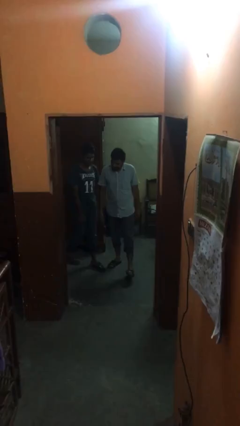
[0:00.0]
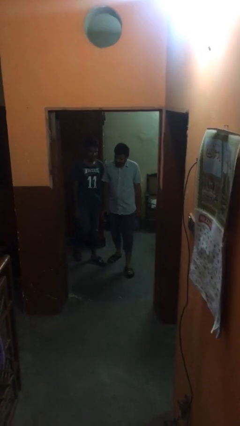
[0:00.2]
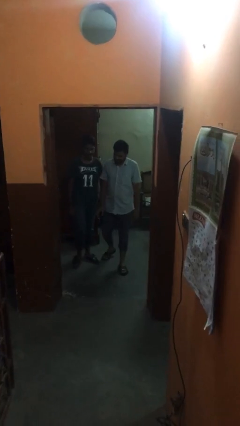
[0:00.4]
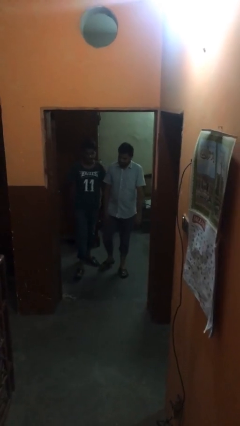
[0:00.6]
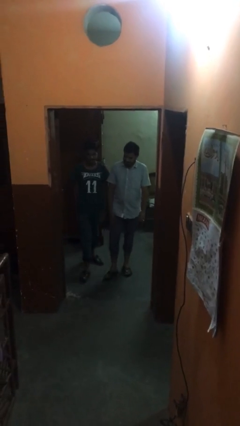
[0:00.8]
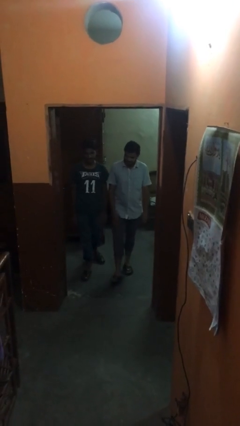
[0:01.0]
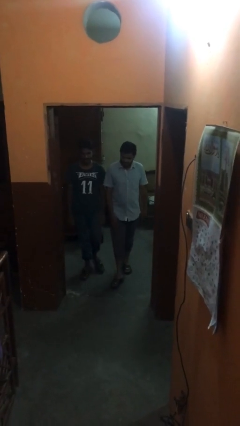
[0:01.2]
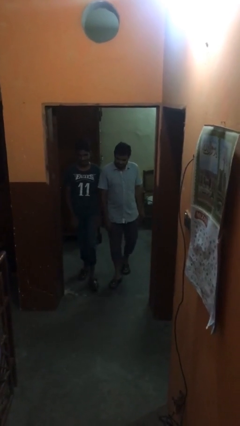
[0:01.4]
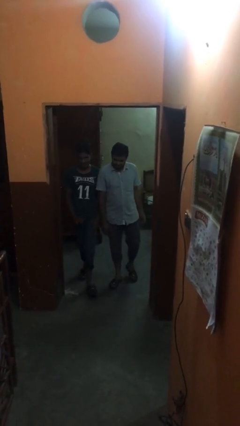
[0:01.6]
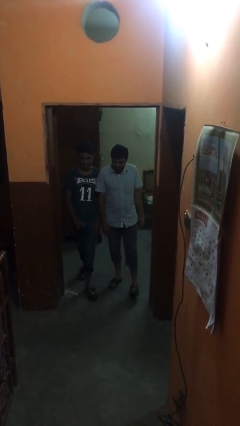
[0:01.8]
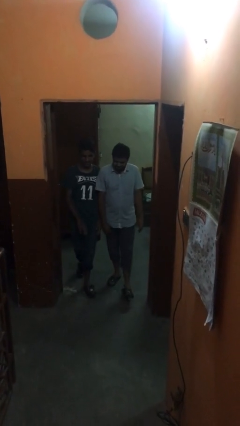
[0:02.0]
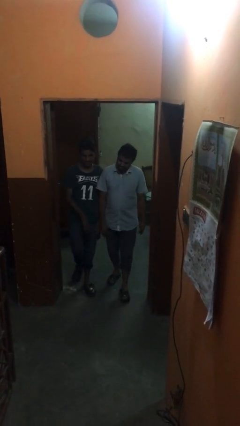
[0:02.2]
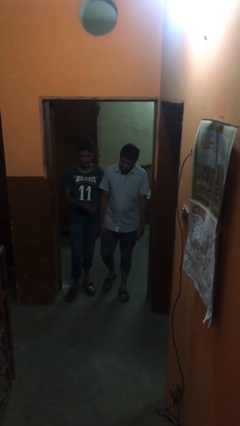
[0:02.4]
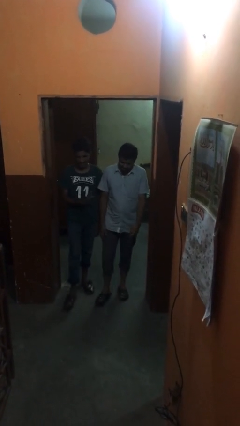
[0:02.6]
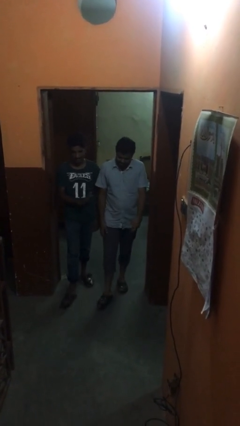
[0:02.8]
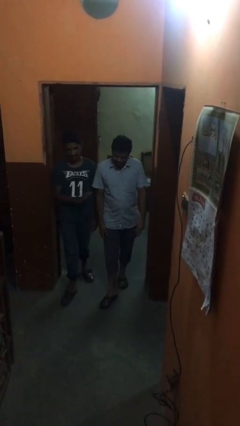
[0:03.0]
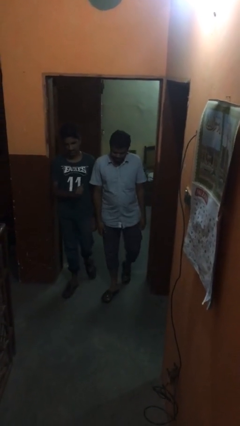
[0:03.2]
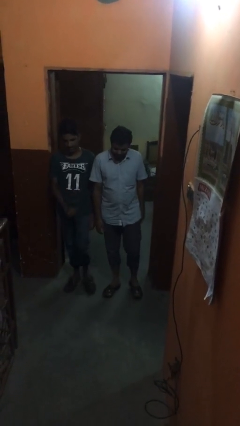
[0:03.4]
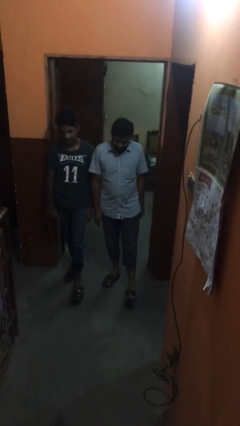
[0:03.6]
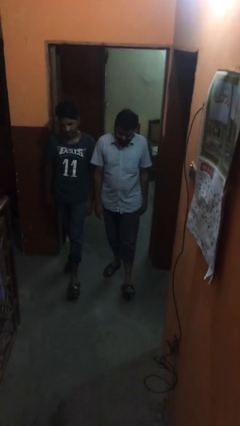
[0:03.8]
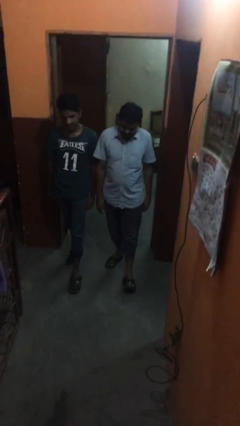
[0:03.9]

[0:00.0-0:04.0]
person talks to person

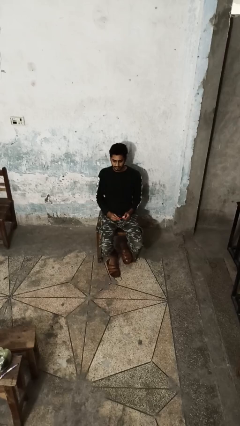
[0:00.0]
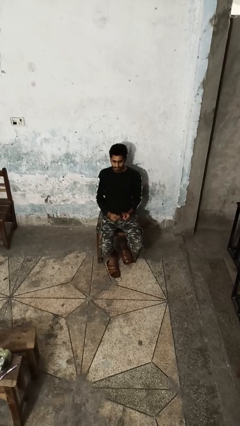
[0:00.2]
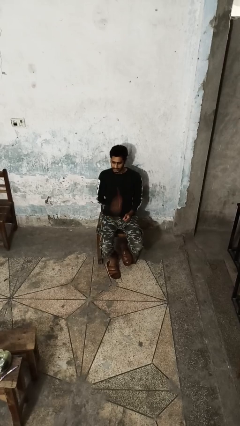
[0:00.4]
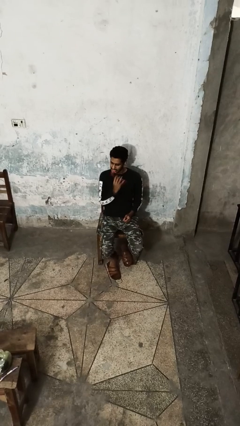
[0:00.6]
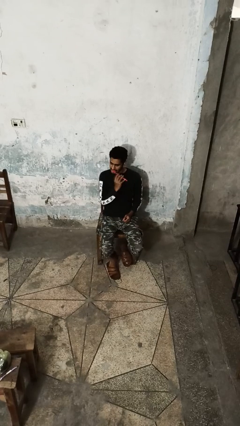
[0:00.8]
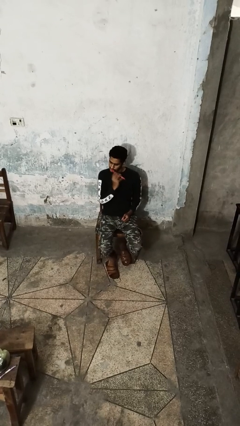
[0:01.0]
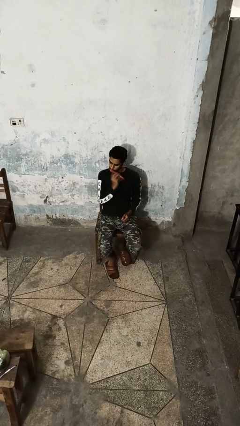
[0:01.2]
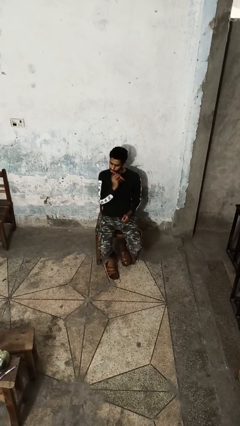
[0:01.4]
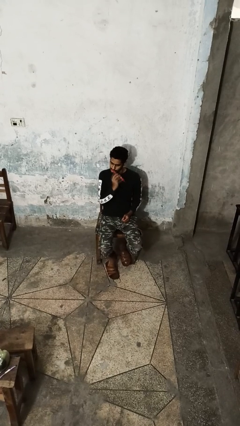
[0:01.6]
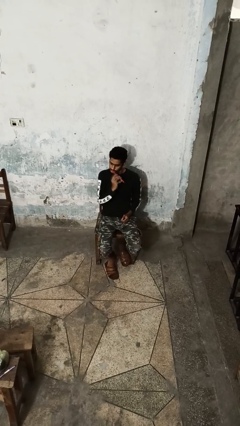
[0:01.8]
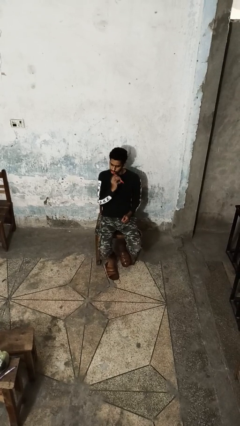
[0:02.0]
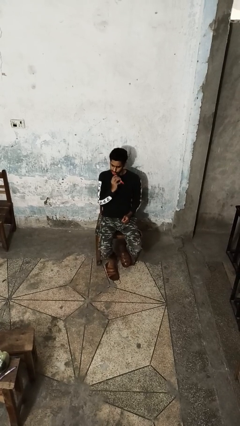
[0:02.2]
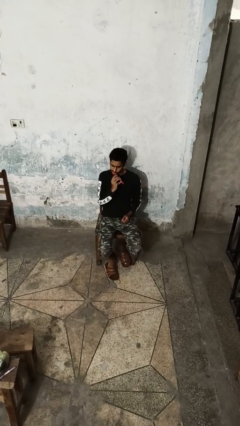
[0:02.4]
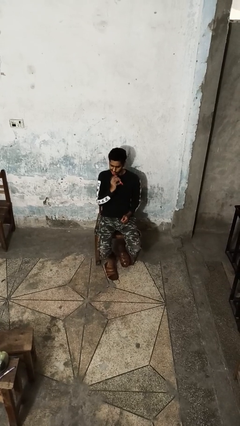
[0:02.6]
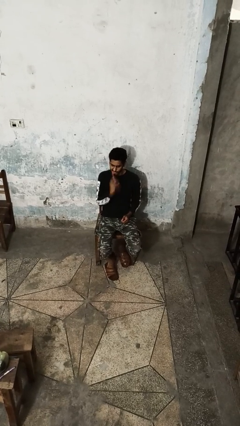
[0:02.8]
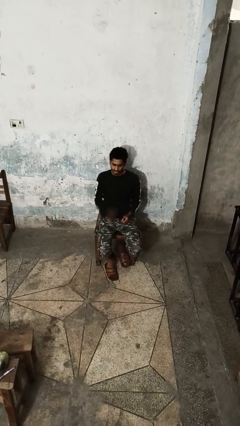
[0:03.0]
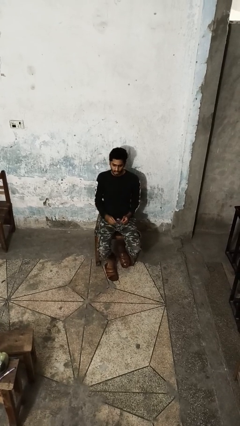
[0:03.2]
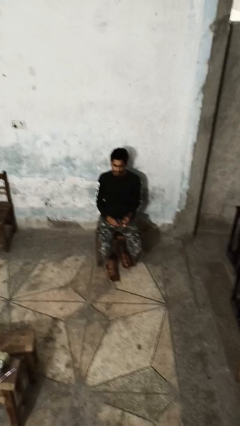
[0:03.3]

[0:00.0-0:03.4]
person brushes teeth

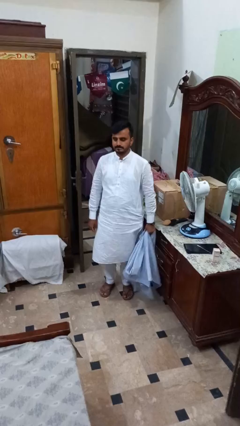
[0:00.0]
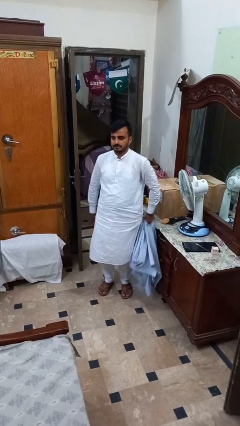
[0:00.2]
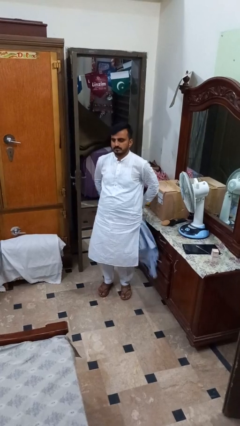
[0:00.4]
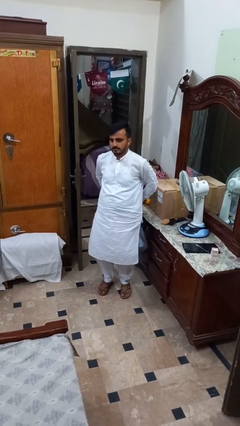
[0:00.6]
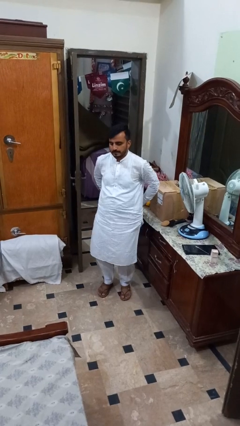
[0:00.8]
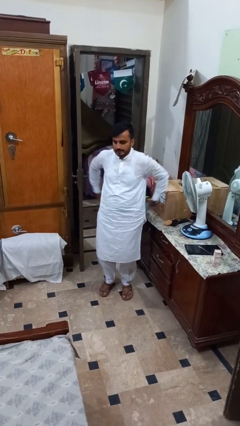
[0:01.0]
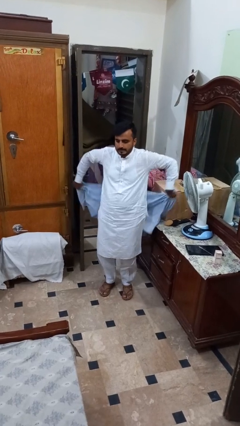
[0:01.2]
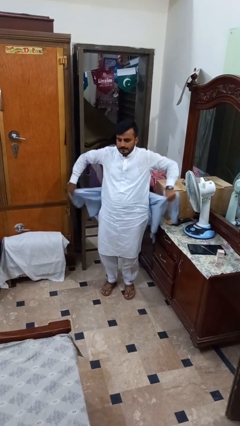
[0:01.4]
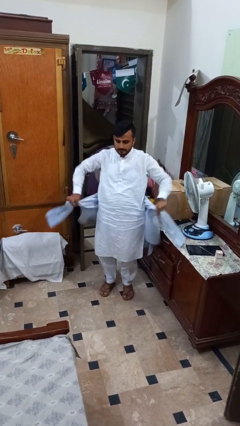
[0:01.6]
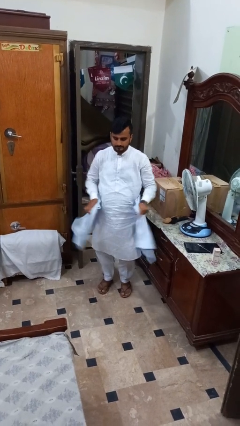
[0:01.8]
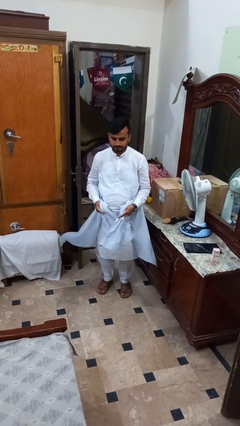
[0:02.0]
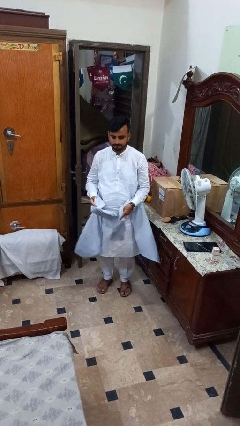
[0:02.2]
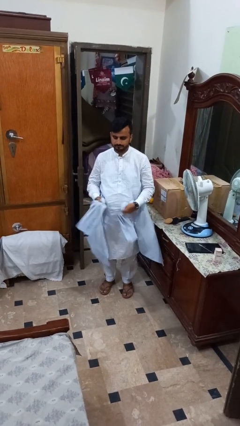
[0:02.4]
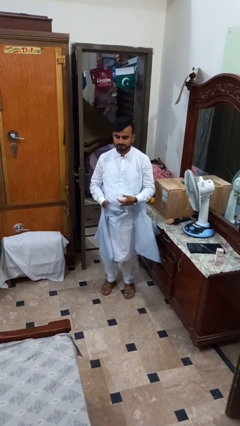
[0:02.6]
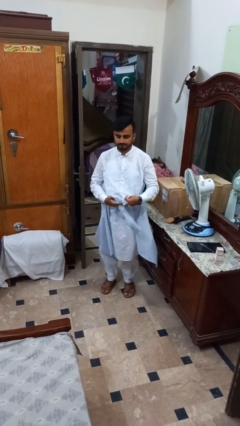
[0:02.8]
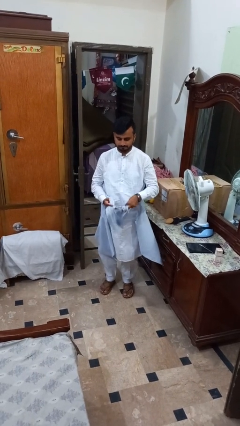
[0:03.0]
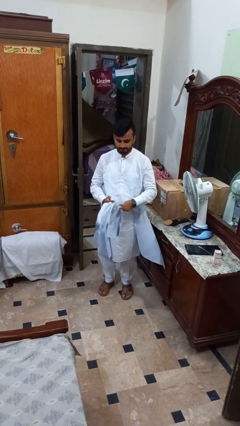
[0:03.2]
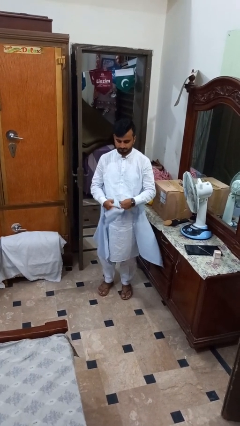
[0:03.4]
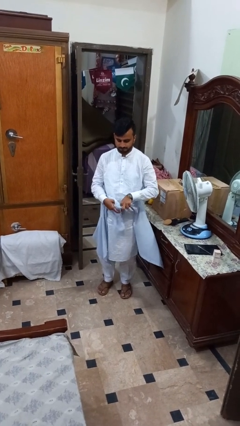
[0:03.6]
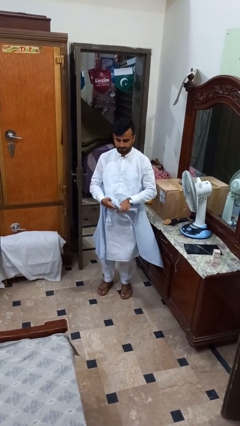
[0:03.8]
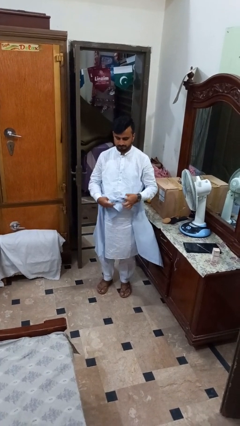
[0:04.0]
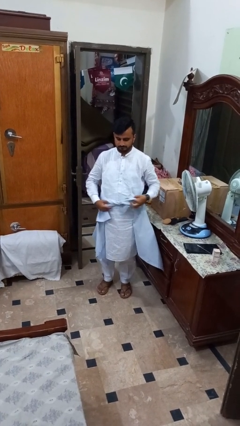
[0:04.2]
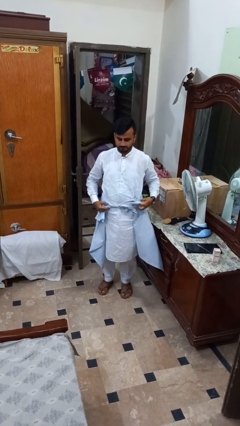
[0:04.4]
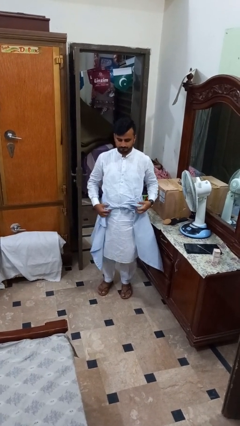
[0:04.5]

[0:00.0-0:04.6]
person ties jacket around waist

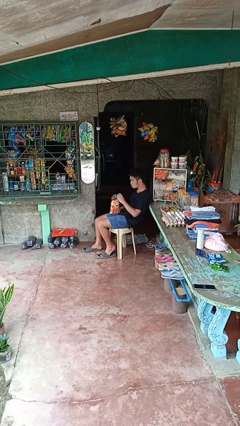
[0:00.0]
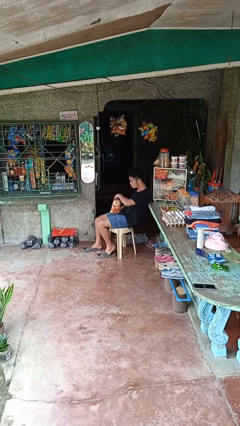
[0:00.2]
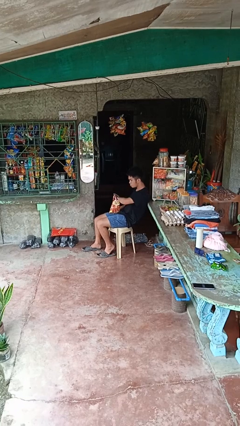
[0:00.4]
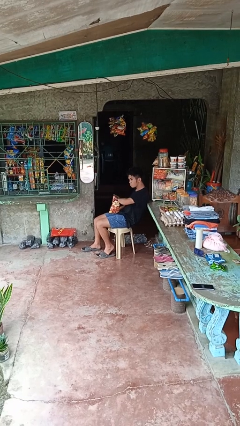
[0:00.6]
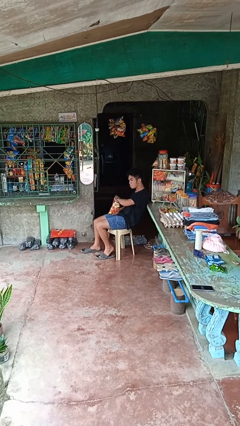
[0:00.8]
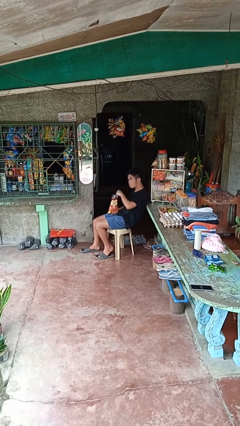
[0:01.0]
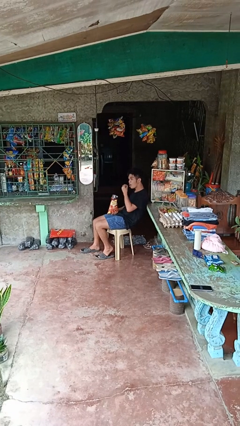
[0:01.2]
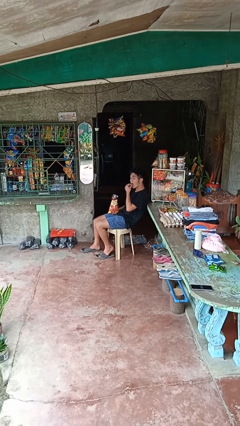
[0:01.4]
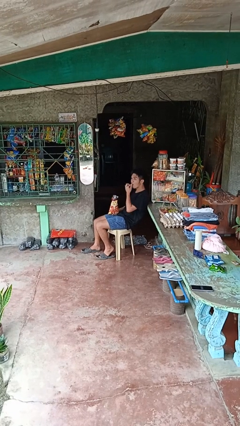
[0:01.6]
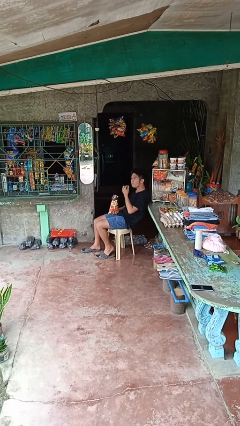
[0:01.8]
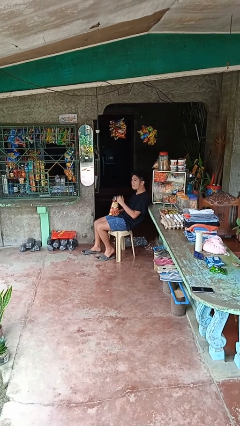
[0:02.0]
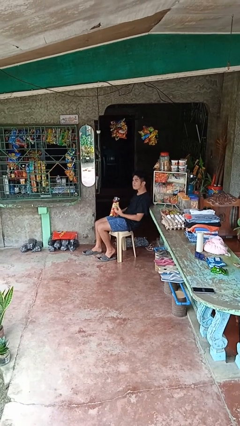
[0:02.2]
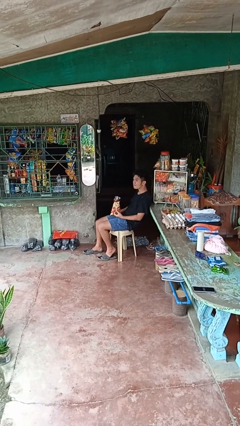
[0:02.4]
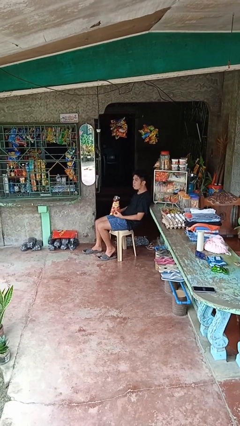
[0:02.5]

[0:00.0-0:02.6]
person eats snack from bag

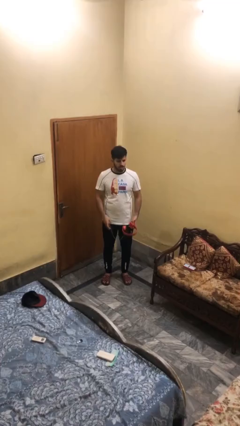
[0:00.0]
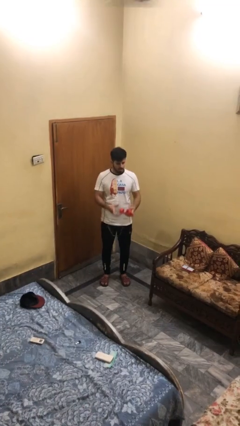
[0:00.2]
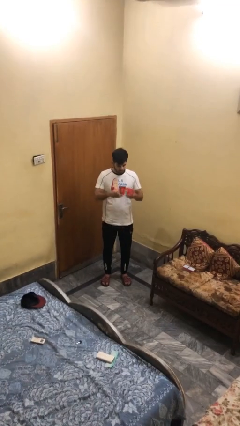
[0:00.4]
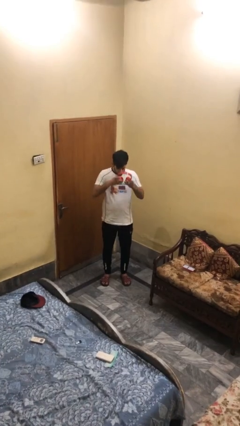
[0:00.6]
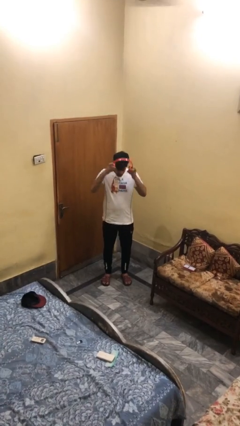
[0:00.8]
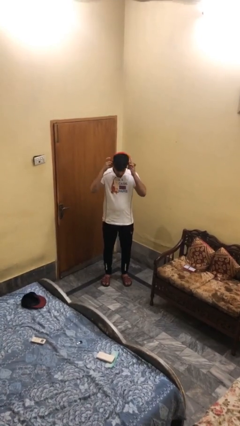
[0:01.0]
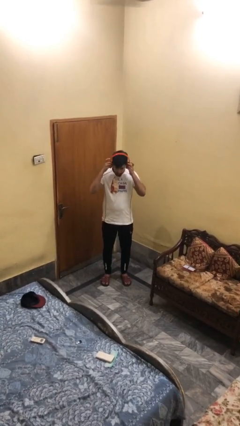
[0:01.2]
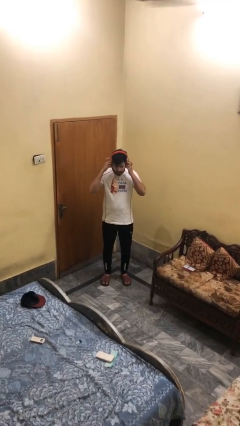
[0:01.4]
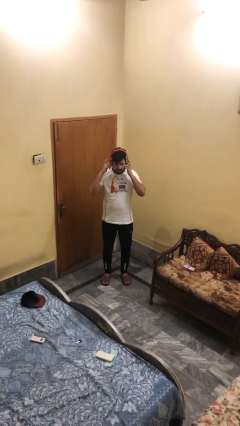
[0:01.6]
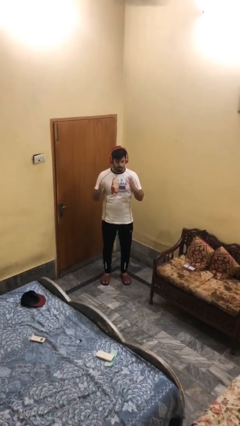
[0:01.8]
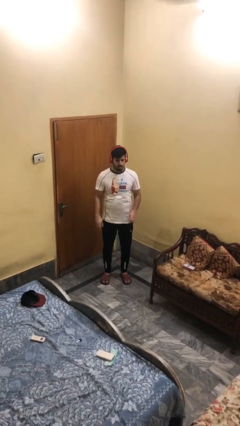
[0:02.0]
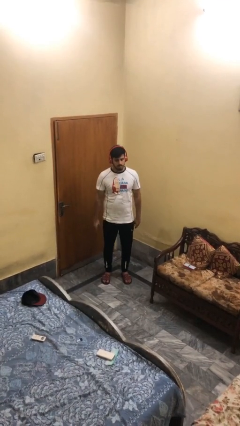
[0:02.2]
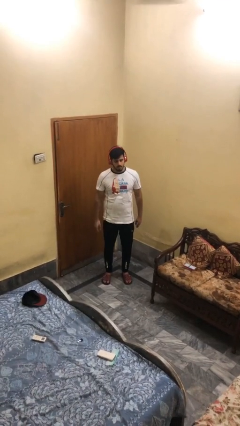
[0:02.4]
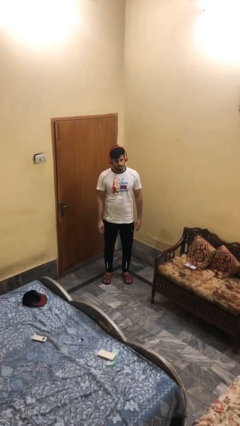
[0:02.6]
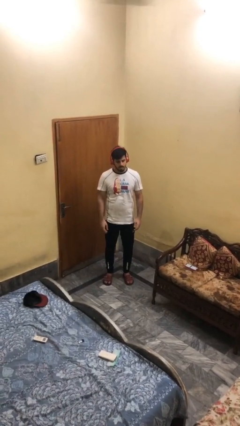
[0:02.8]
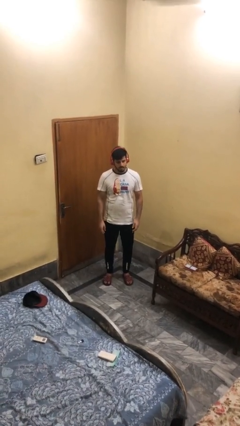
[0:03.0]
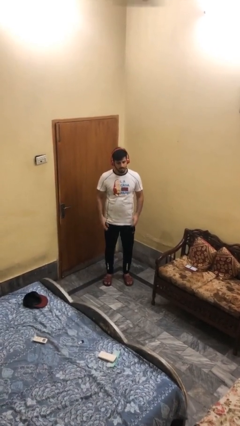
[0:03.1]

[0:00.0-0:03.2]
person puts on headphones
